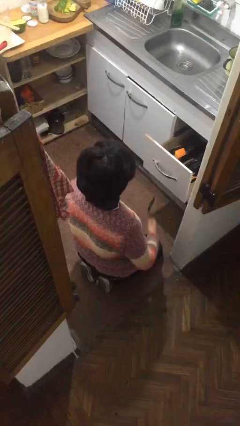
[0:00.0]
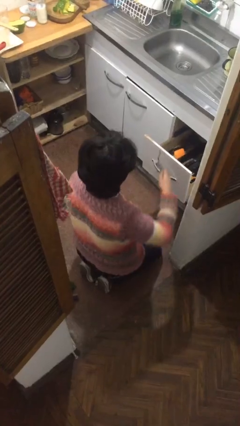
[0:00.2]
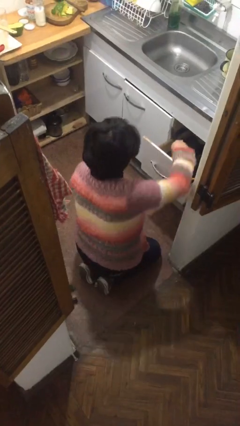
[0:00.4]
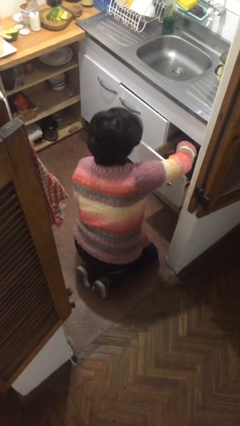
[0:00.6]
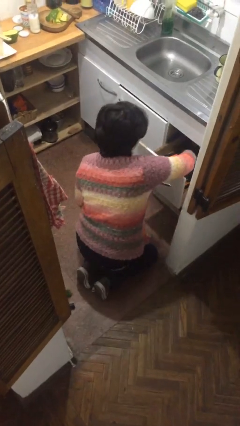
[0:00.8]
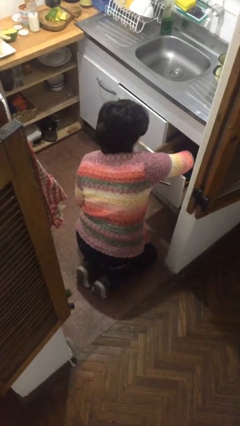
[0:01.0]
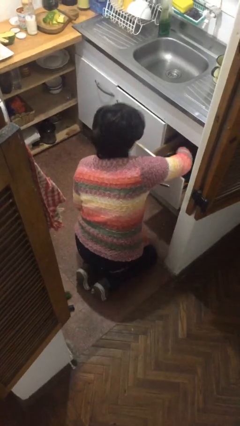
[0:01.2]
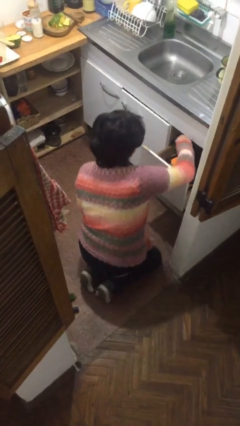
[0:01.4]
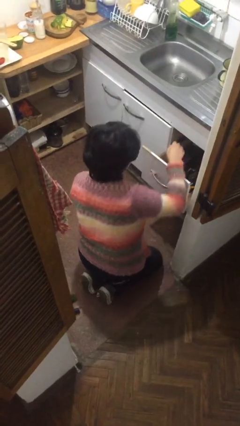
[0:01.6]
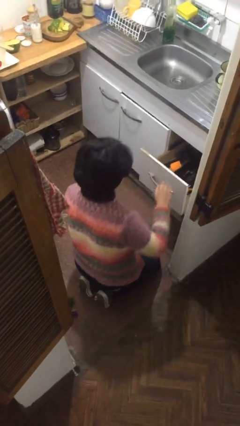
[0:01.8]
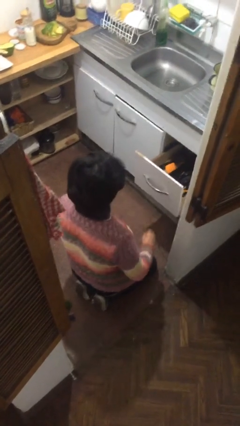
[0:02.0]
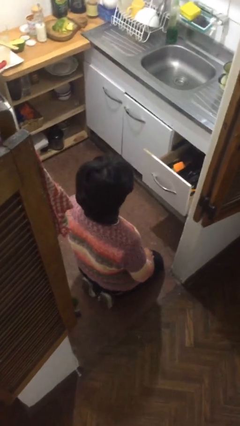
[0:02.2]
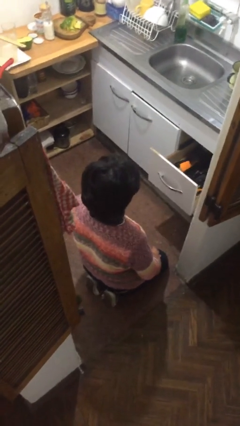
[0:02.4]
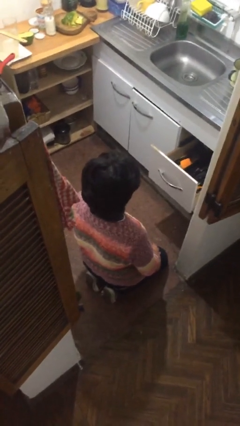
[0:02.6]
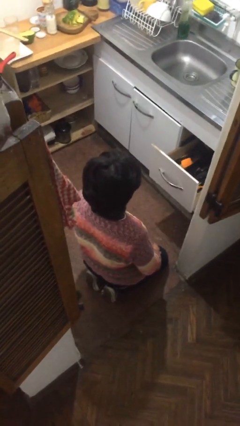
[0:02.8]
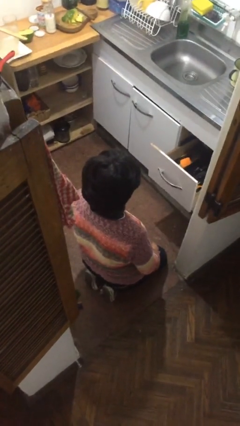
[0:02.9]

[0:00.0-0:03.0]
person puts object into kitchen drawer

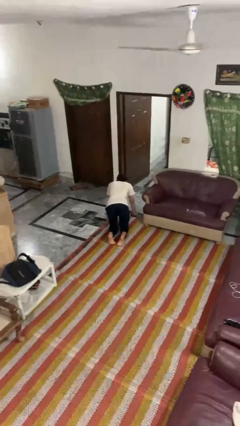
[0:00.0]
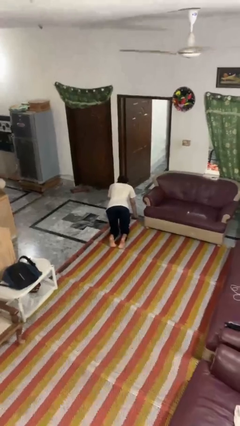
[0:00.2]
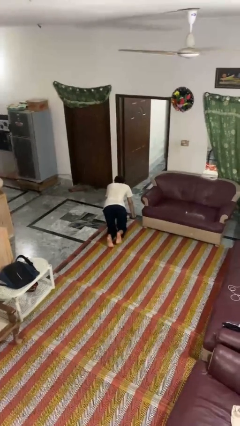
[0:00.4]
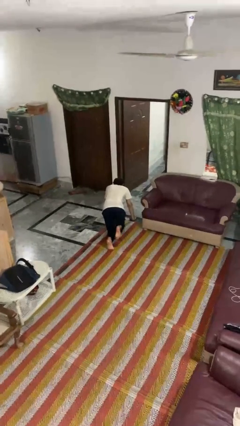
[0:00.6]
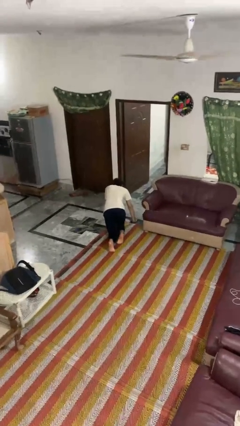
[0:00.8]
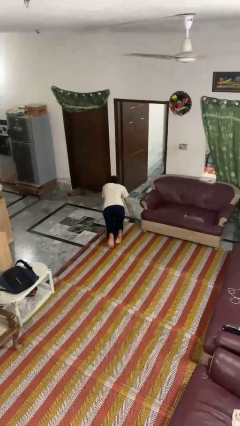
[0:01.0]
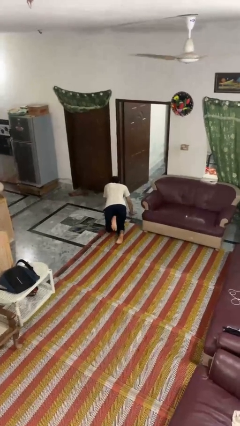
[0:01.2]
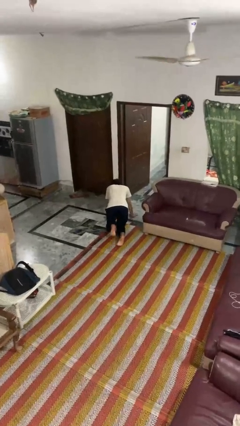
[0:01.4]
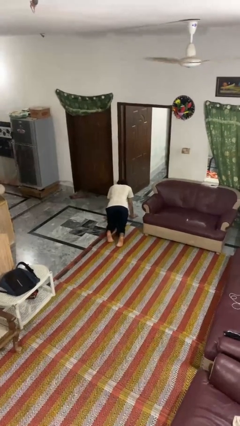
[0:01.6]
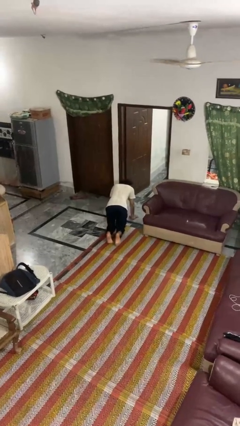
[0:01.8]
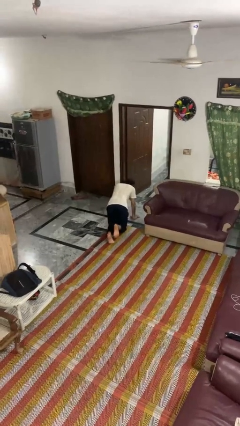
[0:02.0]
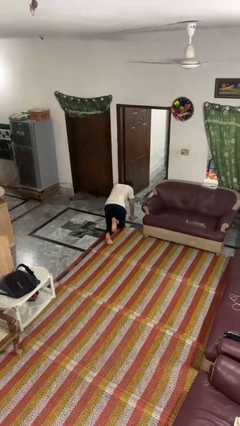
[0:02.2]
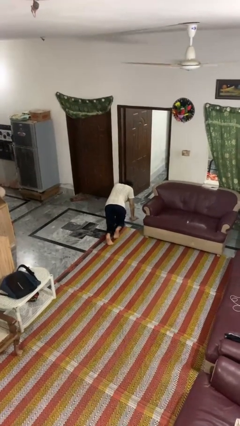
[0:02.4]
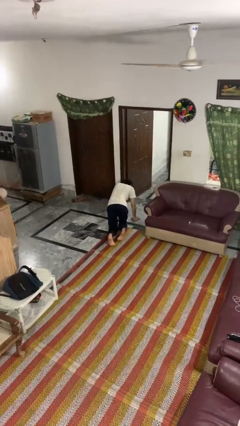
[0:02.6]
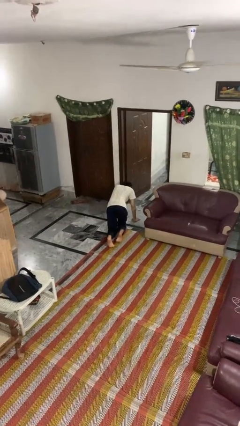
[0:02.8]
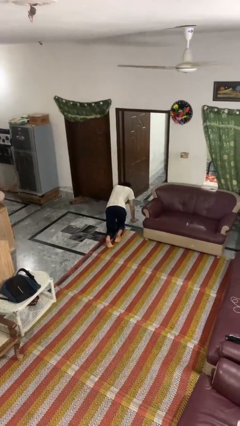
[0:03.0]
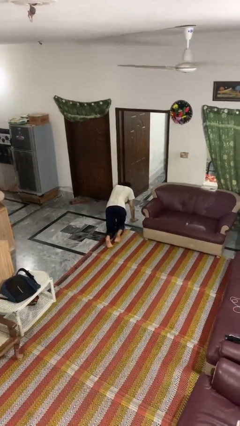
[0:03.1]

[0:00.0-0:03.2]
person crawls

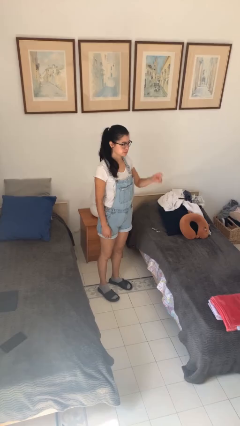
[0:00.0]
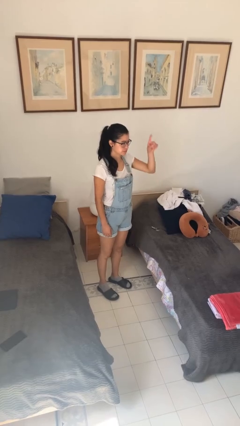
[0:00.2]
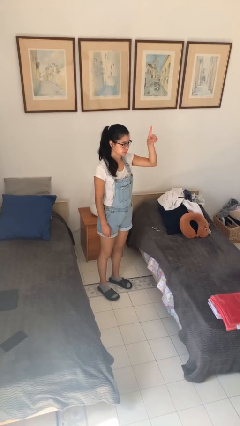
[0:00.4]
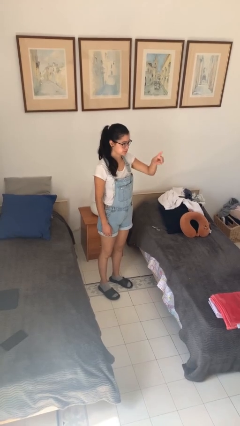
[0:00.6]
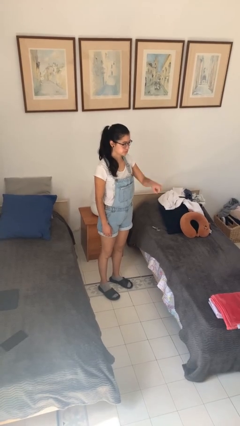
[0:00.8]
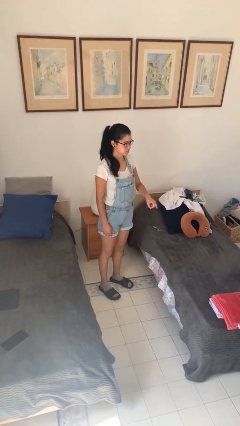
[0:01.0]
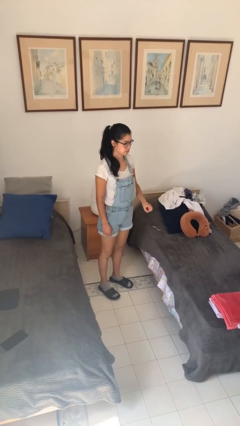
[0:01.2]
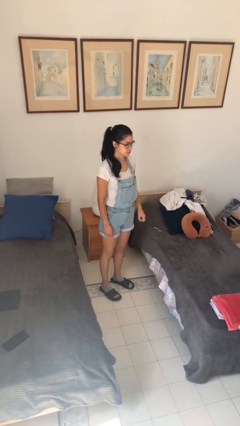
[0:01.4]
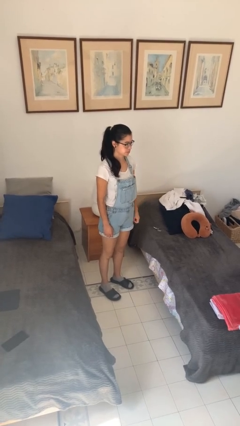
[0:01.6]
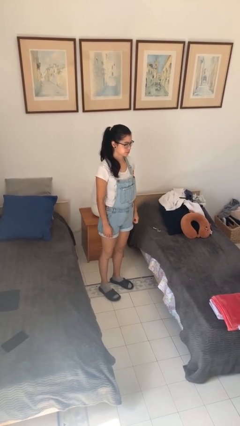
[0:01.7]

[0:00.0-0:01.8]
person gestures number one

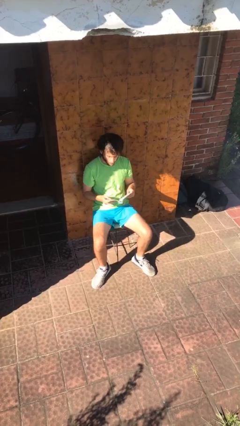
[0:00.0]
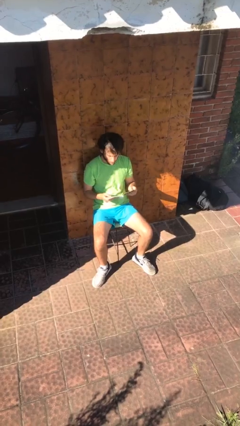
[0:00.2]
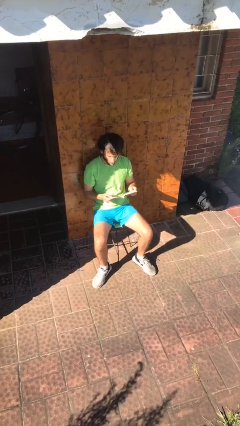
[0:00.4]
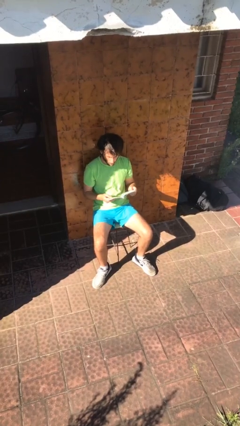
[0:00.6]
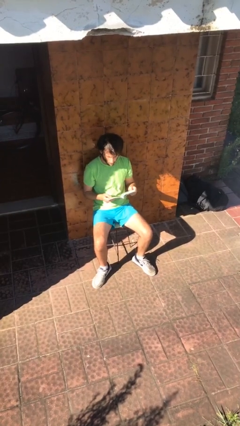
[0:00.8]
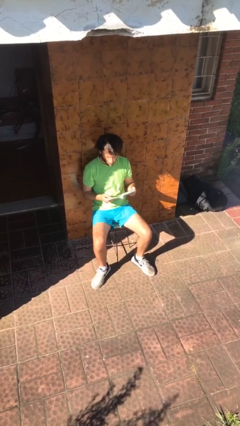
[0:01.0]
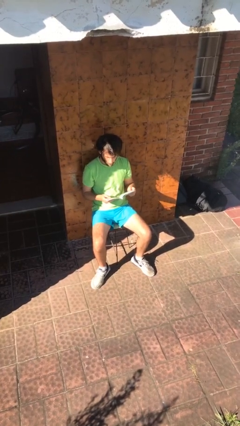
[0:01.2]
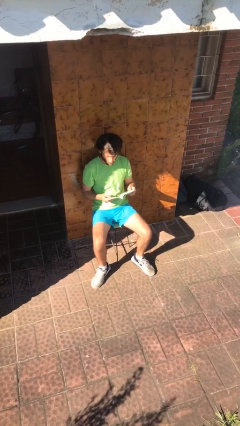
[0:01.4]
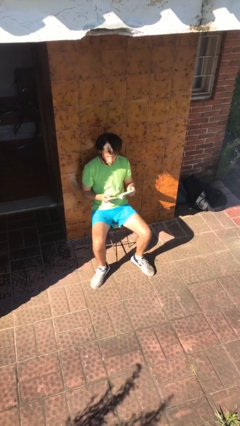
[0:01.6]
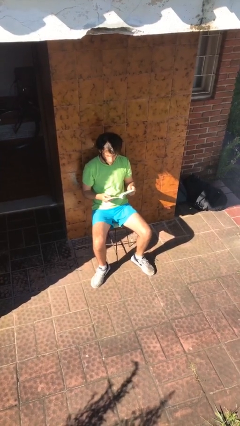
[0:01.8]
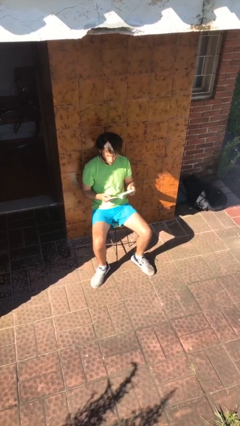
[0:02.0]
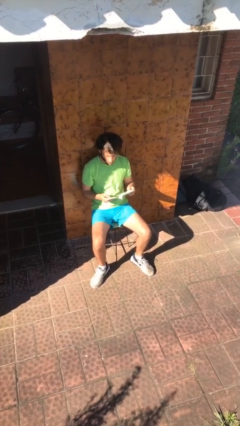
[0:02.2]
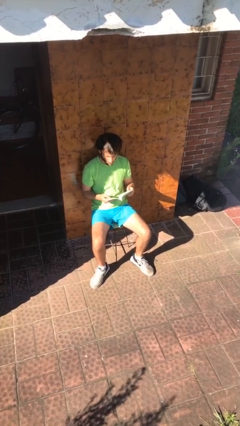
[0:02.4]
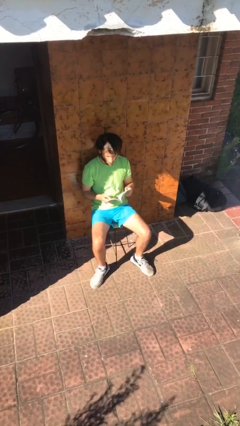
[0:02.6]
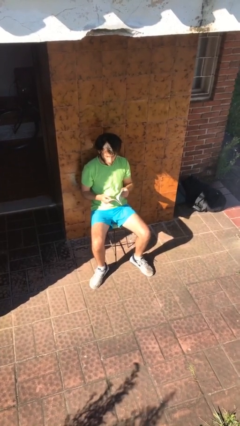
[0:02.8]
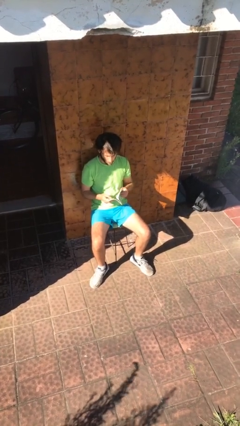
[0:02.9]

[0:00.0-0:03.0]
person reads document

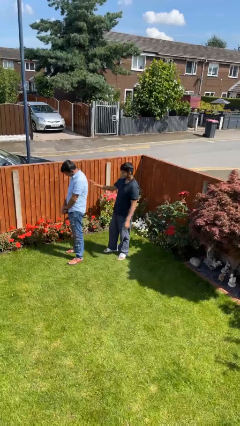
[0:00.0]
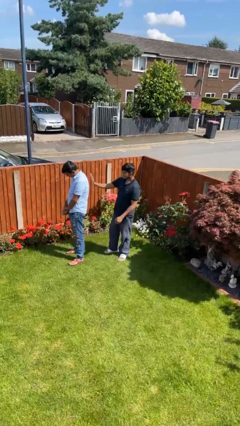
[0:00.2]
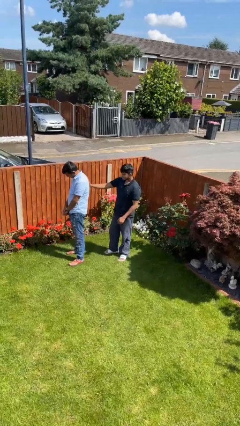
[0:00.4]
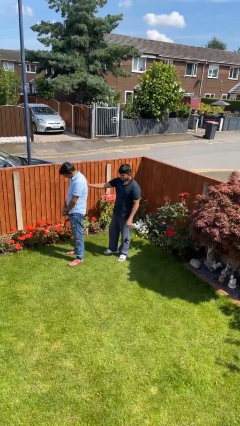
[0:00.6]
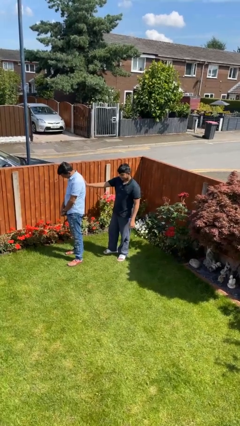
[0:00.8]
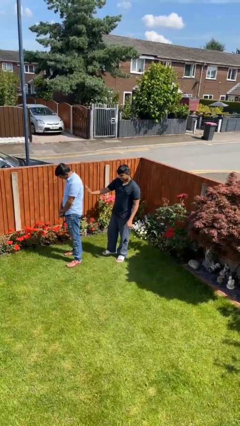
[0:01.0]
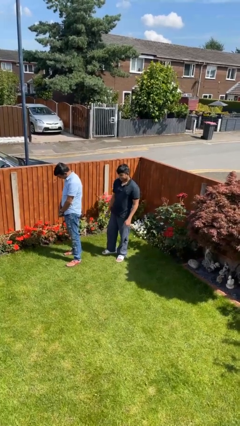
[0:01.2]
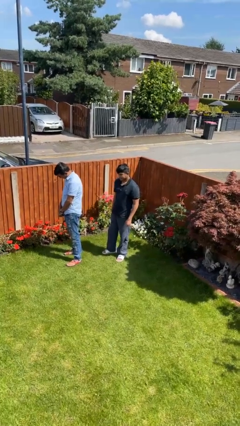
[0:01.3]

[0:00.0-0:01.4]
person touches back of person

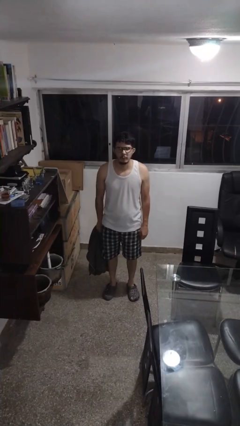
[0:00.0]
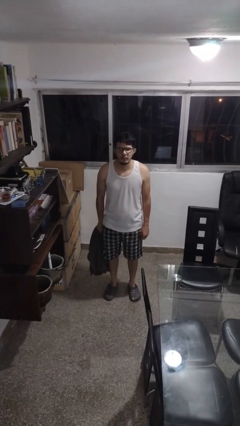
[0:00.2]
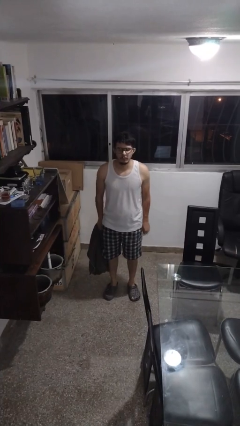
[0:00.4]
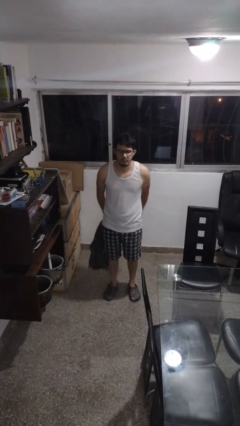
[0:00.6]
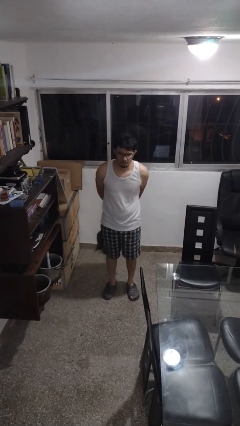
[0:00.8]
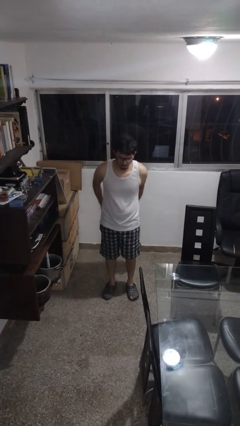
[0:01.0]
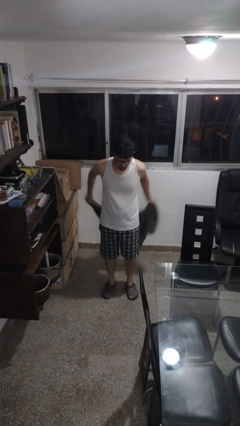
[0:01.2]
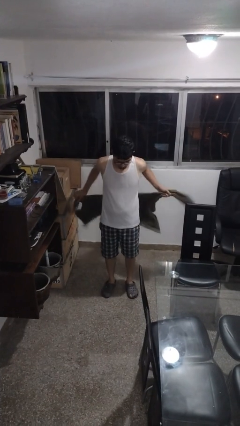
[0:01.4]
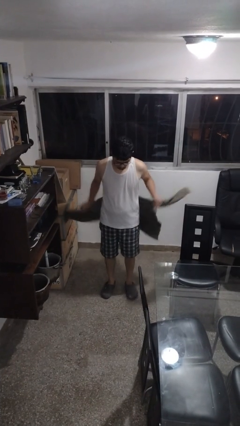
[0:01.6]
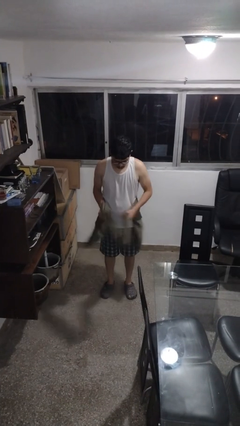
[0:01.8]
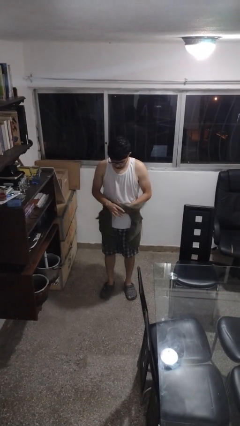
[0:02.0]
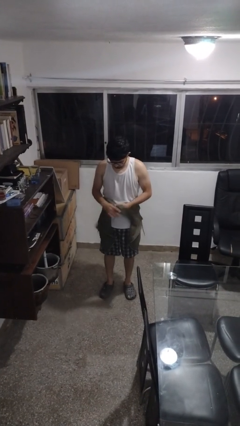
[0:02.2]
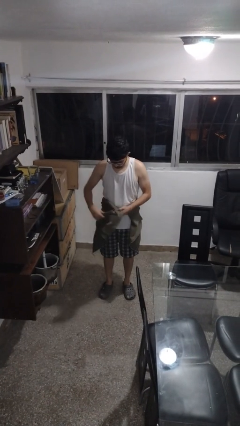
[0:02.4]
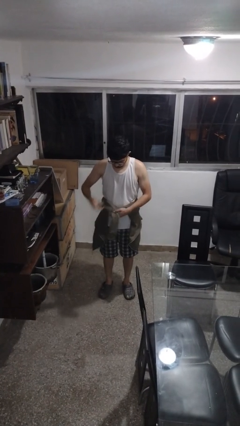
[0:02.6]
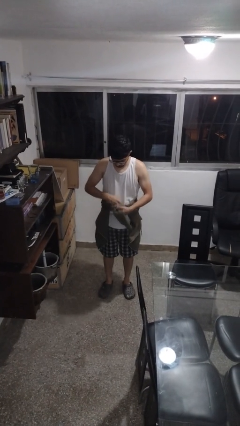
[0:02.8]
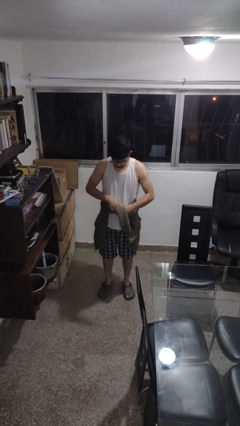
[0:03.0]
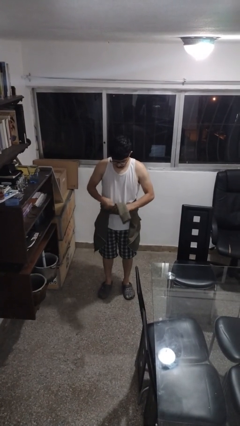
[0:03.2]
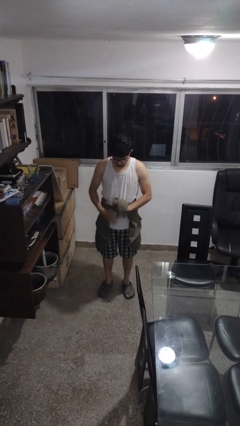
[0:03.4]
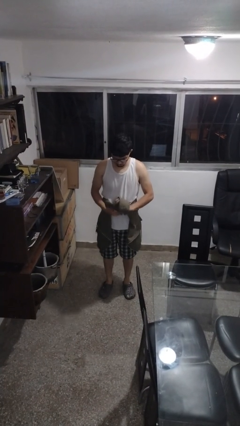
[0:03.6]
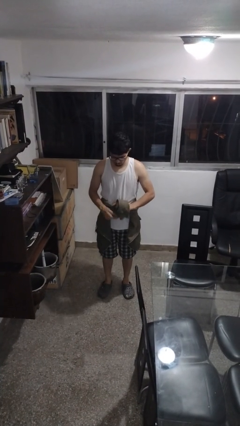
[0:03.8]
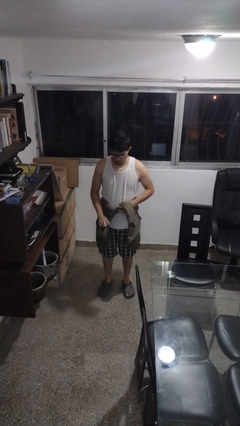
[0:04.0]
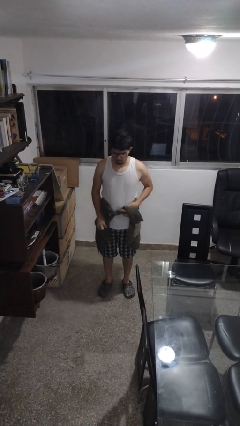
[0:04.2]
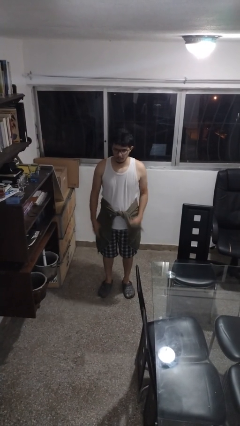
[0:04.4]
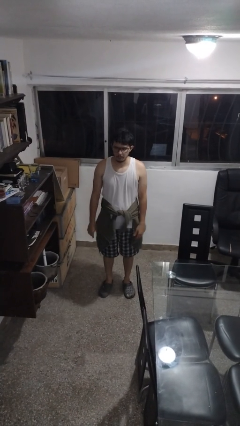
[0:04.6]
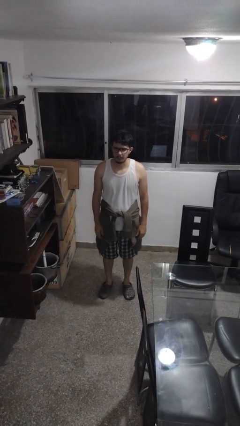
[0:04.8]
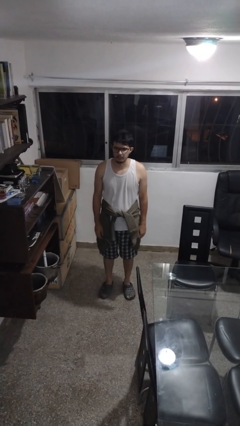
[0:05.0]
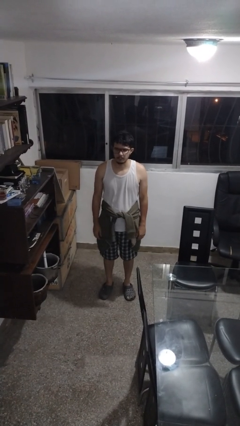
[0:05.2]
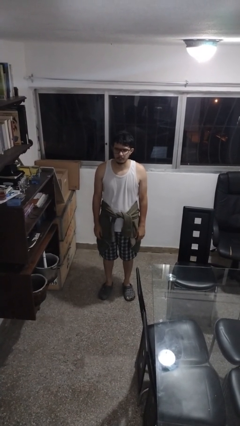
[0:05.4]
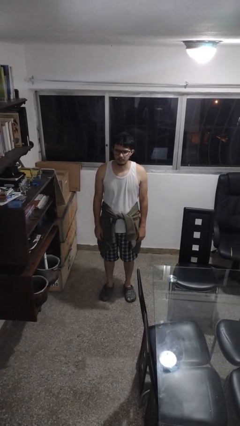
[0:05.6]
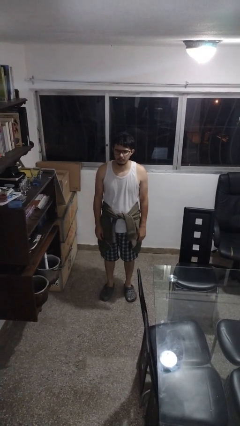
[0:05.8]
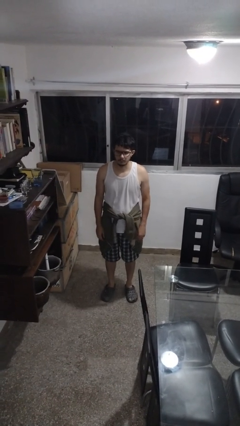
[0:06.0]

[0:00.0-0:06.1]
person ties jacket around waist
